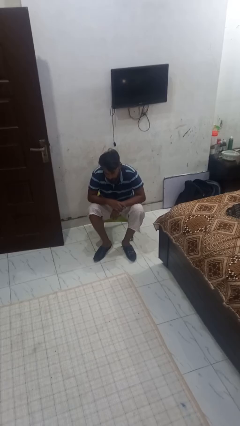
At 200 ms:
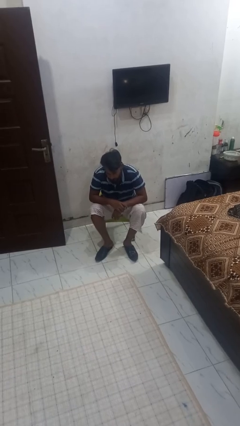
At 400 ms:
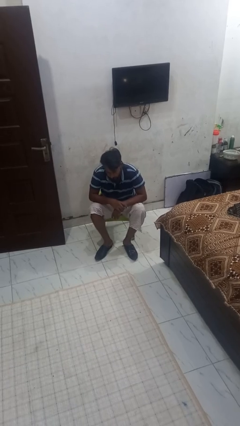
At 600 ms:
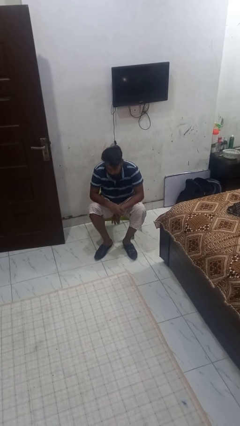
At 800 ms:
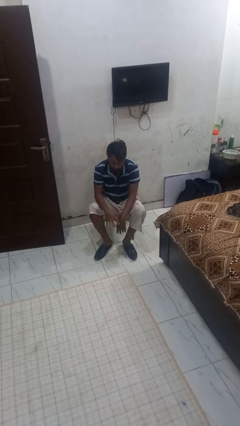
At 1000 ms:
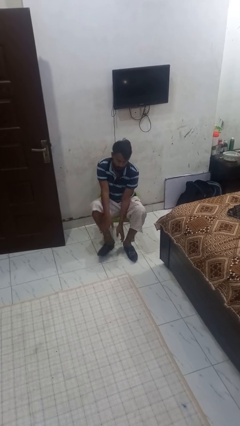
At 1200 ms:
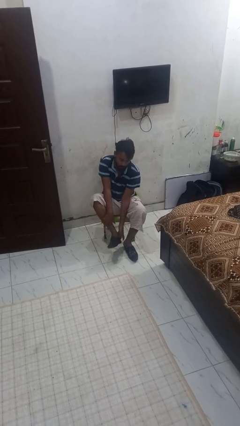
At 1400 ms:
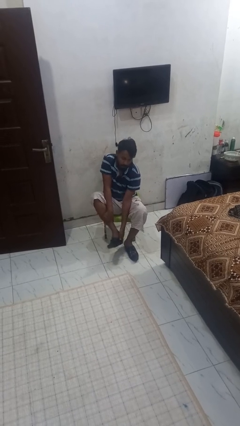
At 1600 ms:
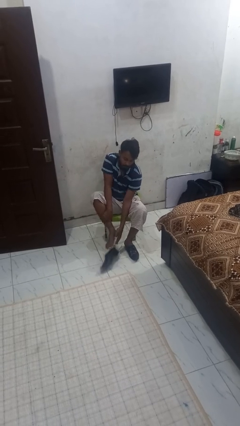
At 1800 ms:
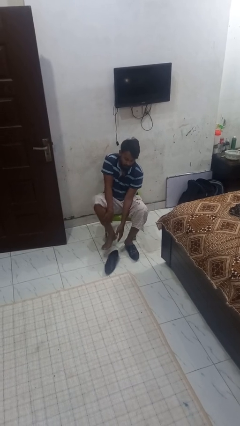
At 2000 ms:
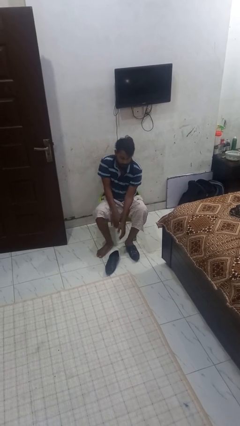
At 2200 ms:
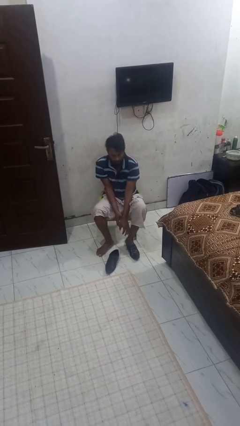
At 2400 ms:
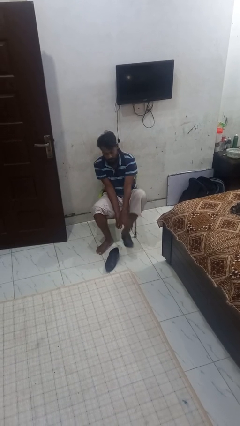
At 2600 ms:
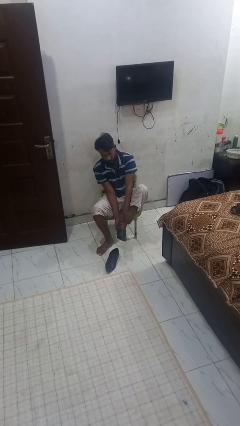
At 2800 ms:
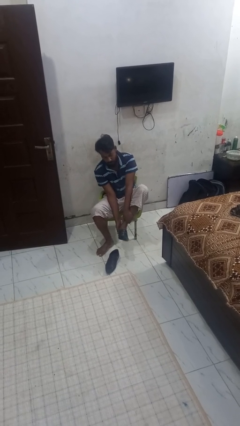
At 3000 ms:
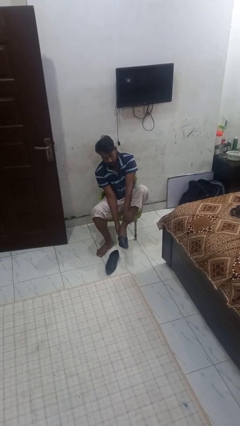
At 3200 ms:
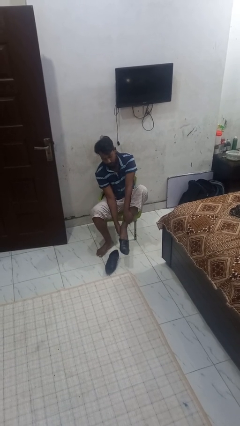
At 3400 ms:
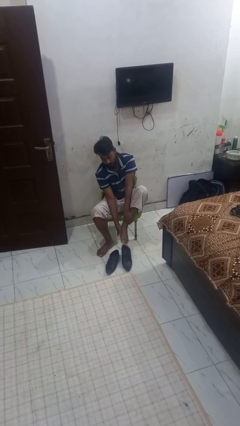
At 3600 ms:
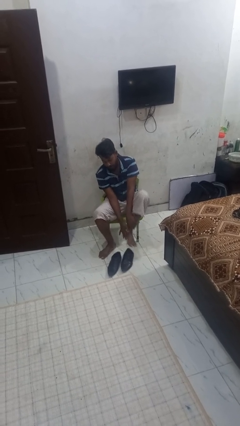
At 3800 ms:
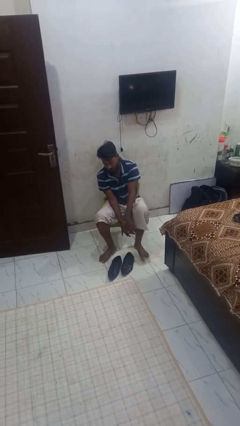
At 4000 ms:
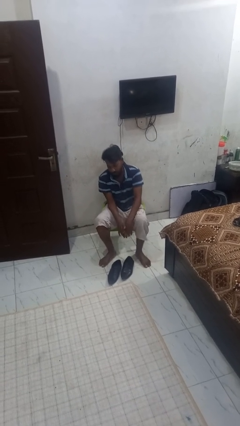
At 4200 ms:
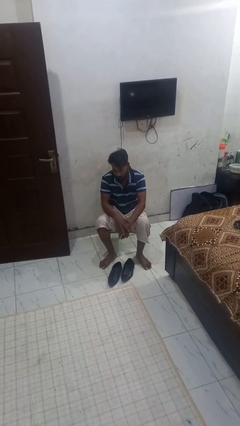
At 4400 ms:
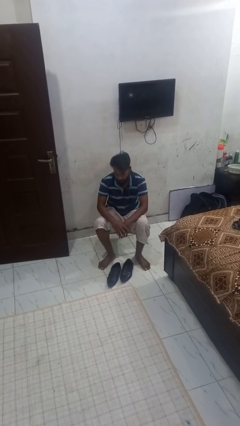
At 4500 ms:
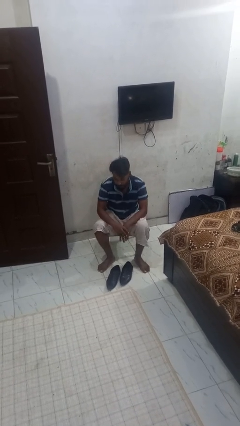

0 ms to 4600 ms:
person takes off shoes

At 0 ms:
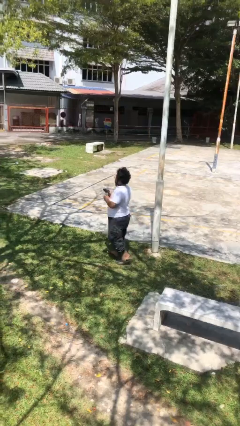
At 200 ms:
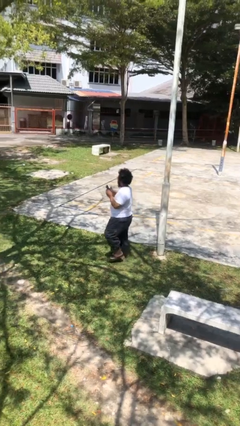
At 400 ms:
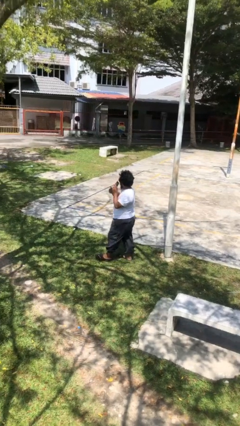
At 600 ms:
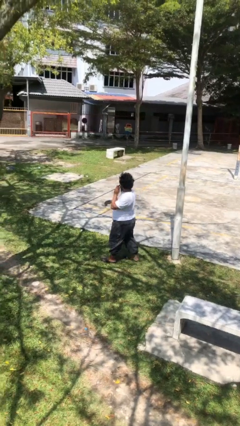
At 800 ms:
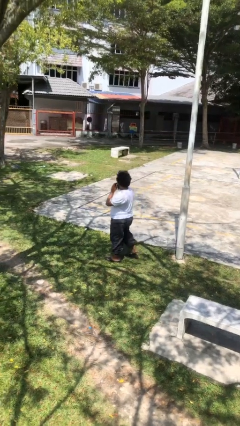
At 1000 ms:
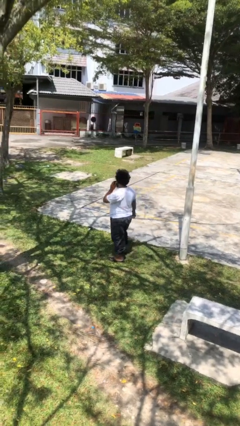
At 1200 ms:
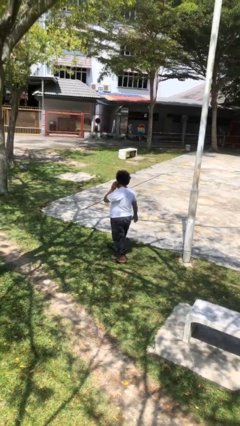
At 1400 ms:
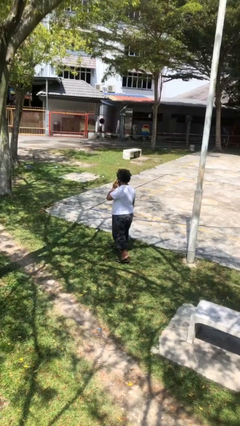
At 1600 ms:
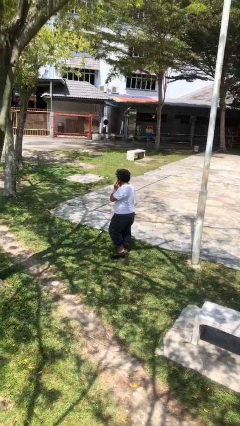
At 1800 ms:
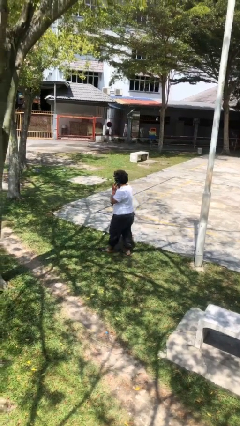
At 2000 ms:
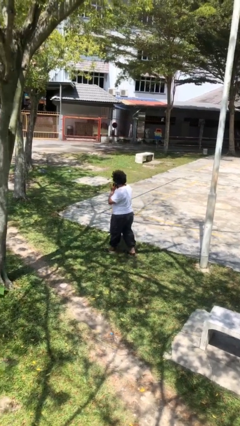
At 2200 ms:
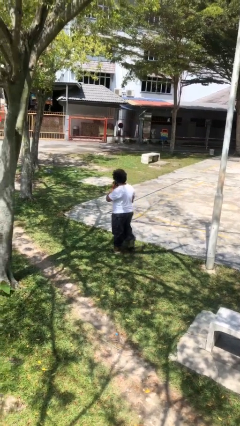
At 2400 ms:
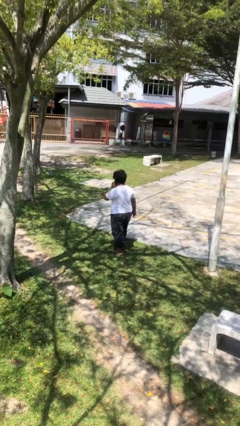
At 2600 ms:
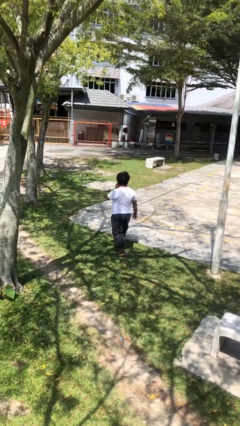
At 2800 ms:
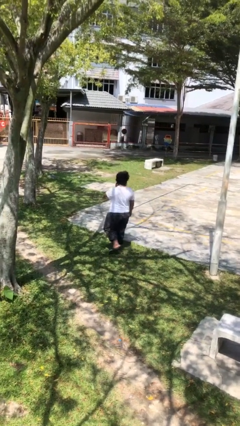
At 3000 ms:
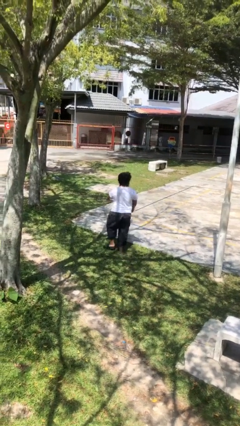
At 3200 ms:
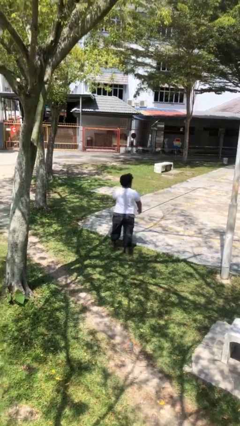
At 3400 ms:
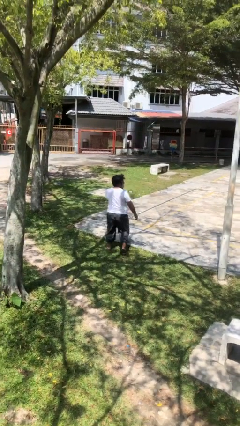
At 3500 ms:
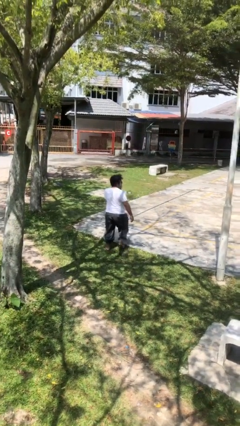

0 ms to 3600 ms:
person talks on phone

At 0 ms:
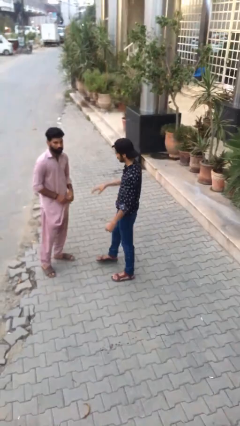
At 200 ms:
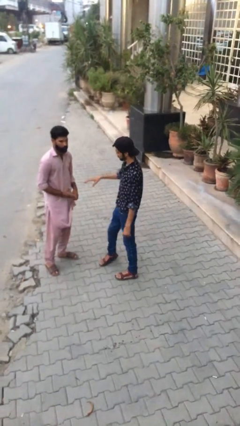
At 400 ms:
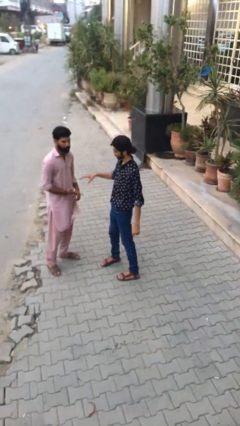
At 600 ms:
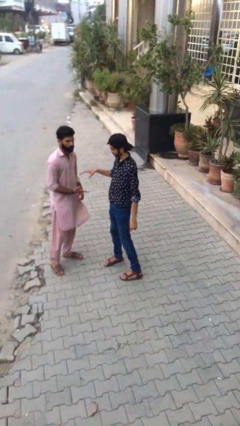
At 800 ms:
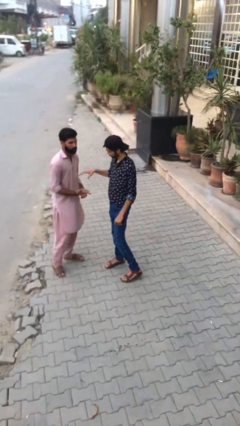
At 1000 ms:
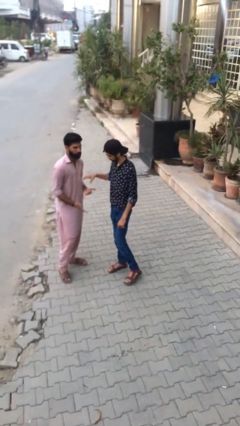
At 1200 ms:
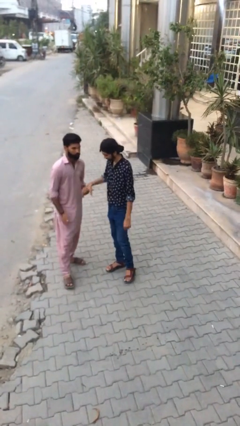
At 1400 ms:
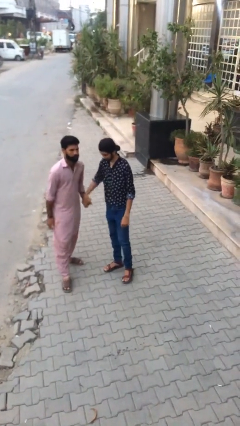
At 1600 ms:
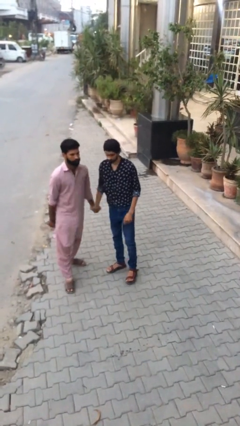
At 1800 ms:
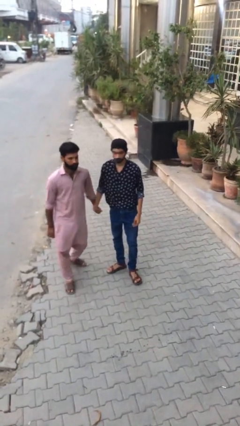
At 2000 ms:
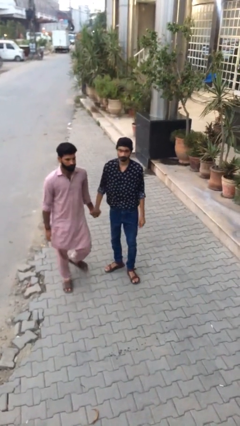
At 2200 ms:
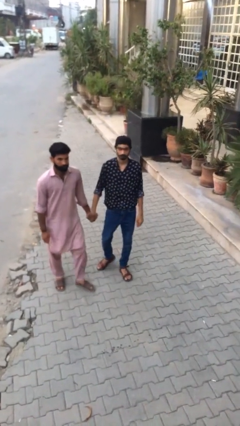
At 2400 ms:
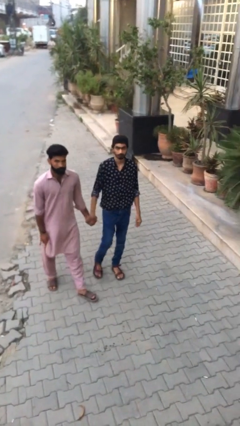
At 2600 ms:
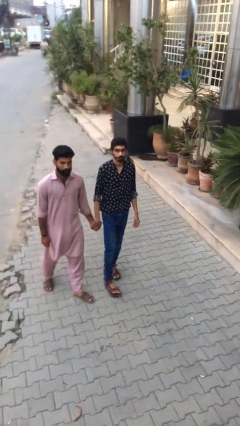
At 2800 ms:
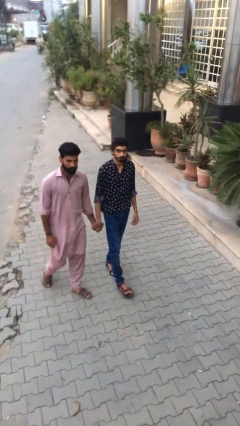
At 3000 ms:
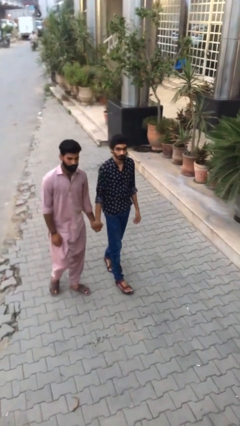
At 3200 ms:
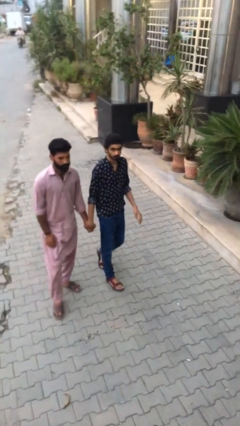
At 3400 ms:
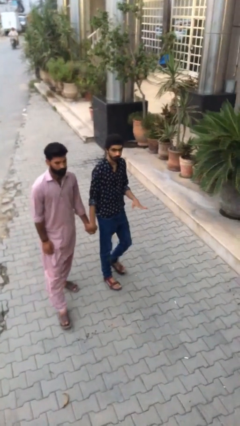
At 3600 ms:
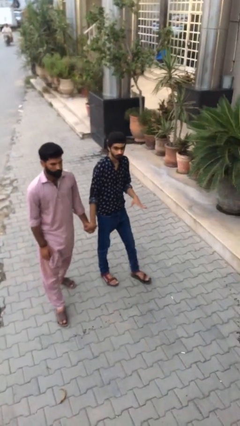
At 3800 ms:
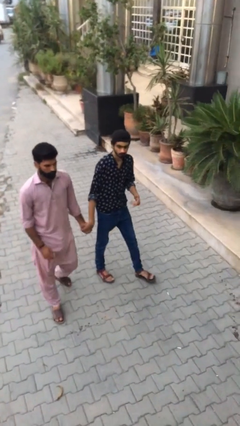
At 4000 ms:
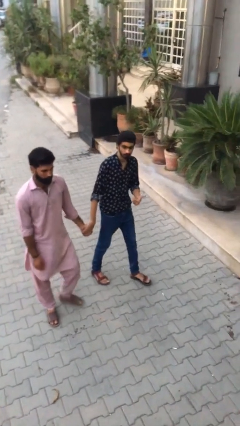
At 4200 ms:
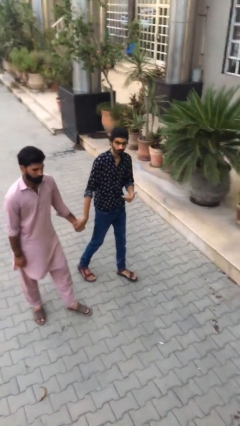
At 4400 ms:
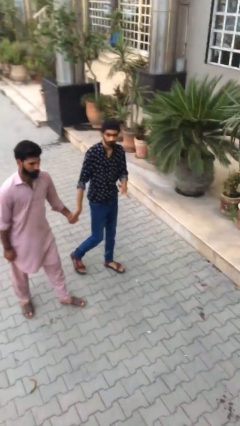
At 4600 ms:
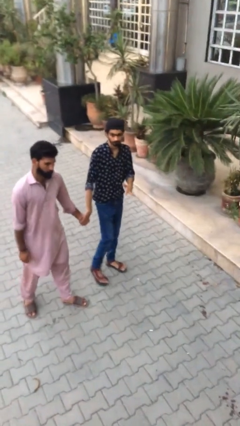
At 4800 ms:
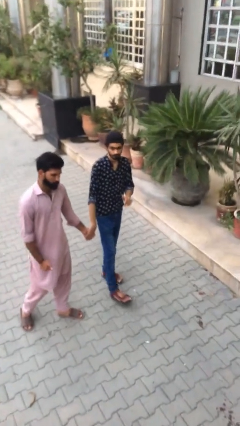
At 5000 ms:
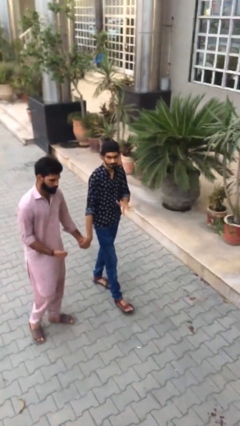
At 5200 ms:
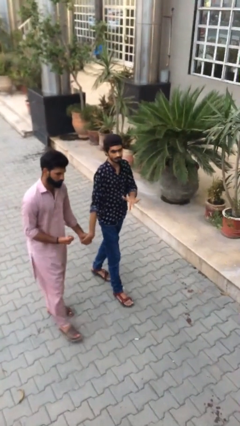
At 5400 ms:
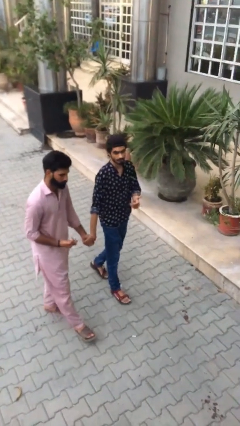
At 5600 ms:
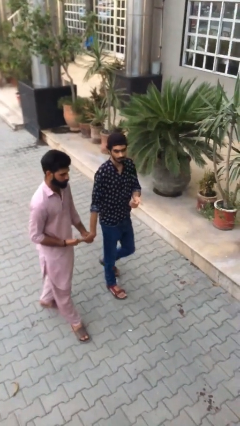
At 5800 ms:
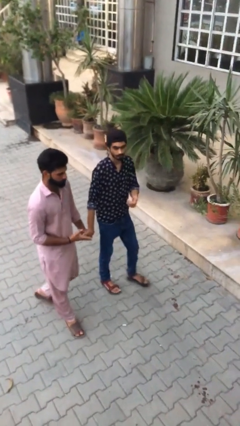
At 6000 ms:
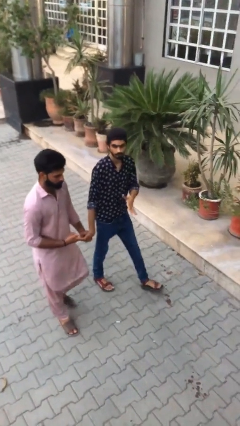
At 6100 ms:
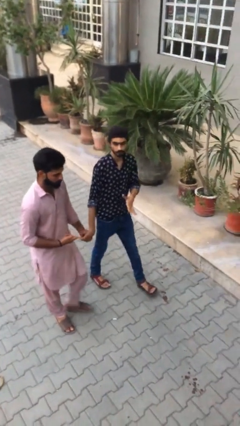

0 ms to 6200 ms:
person holds hand

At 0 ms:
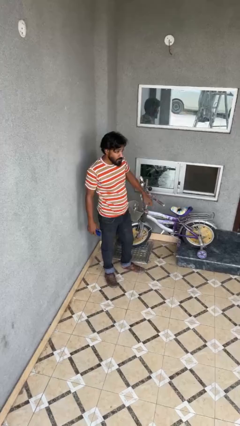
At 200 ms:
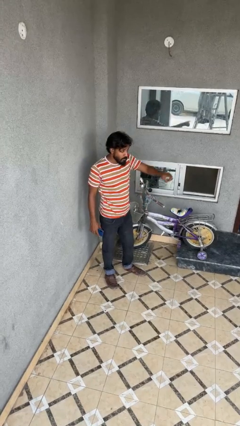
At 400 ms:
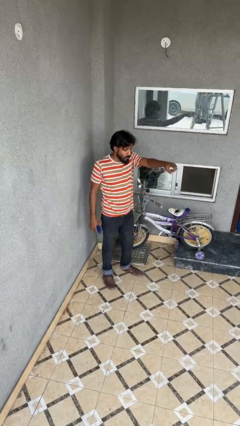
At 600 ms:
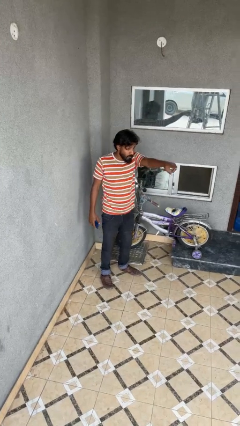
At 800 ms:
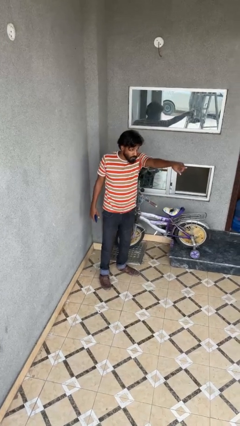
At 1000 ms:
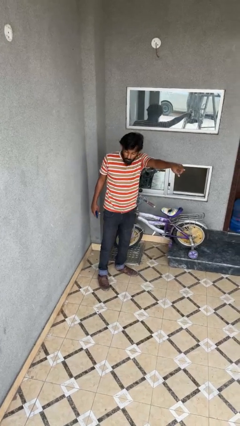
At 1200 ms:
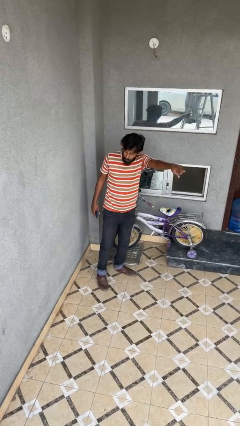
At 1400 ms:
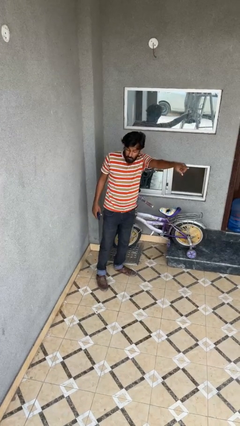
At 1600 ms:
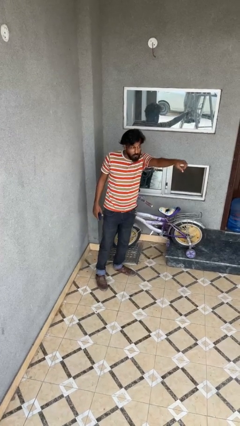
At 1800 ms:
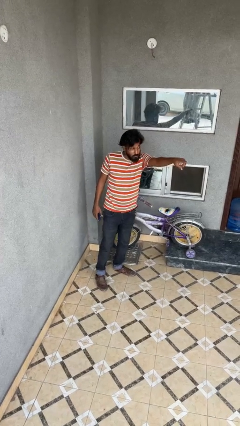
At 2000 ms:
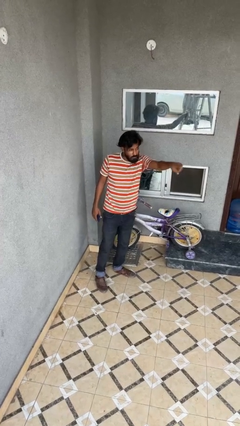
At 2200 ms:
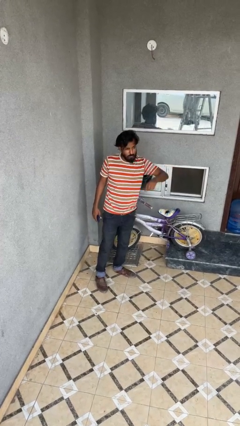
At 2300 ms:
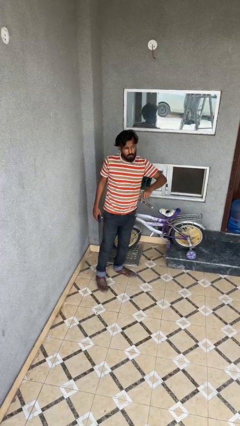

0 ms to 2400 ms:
person points at person

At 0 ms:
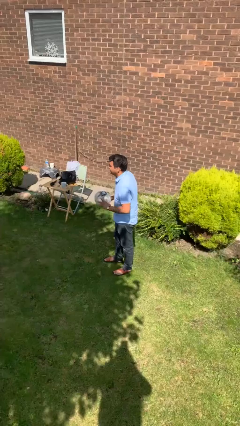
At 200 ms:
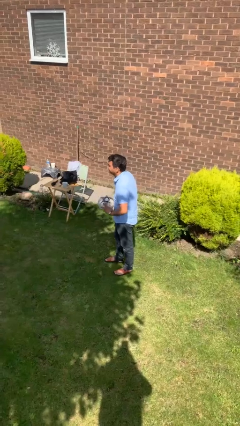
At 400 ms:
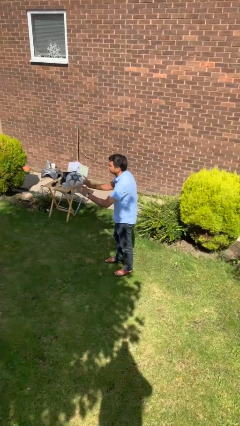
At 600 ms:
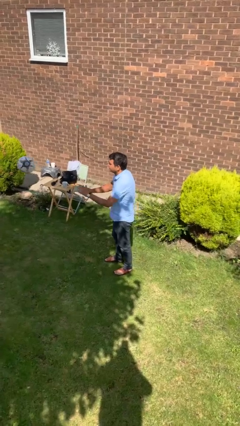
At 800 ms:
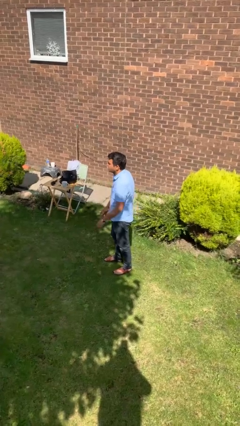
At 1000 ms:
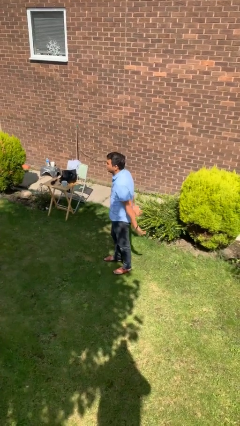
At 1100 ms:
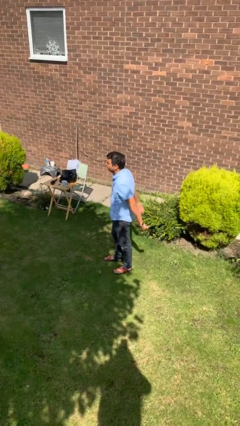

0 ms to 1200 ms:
person throws object to person
